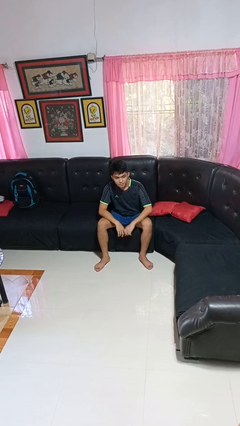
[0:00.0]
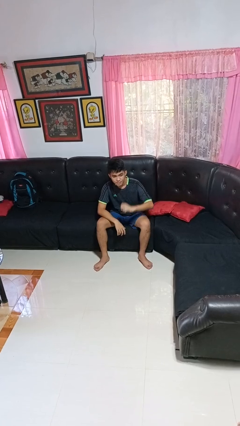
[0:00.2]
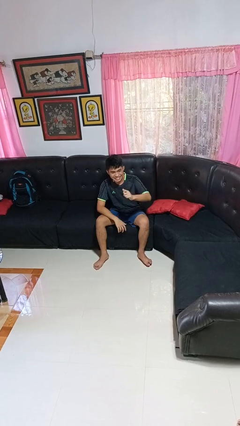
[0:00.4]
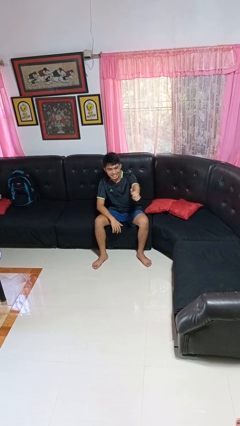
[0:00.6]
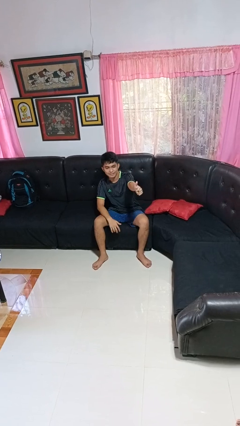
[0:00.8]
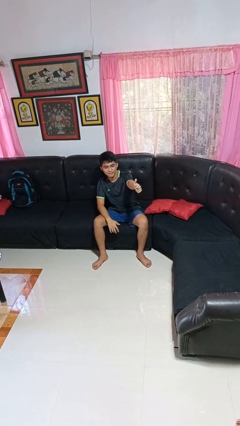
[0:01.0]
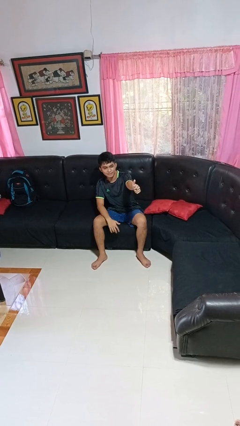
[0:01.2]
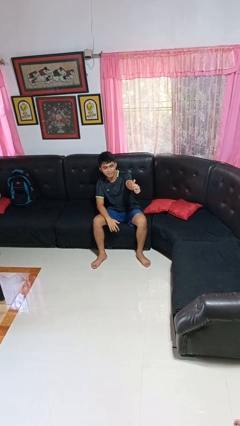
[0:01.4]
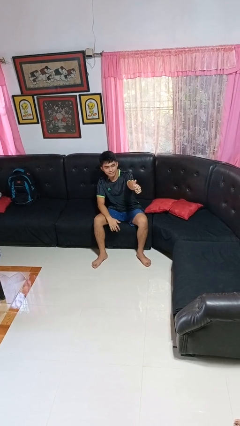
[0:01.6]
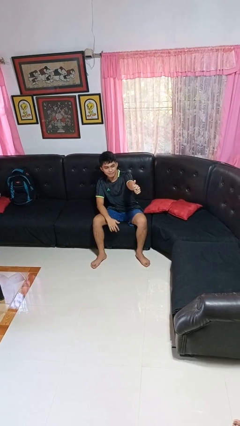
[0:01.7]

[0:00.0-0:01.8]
person gestures thumbs up

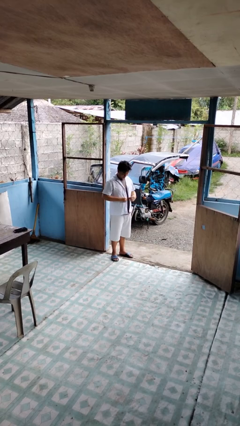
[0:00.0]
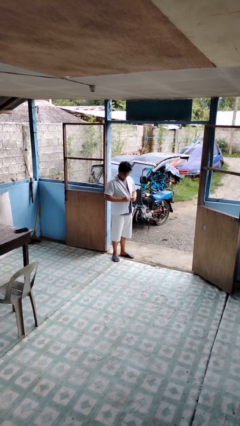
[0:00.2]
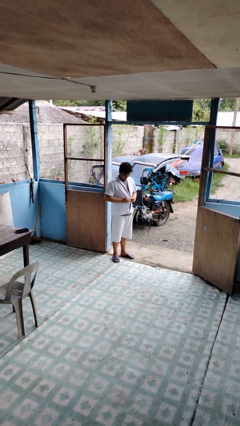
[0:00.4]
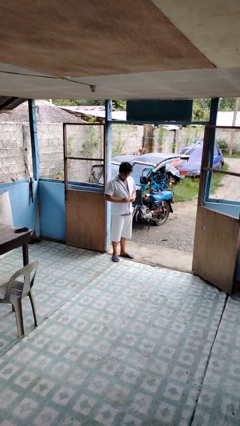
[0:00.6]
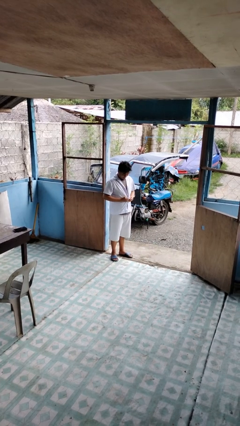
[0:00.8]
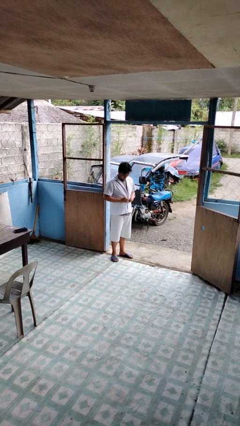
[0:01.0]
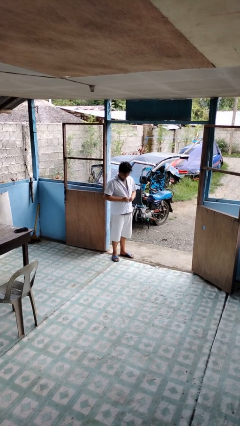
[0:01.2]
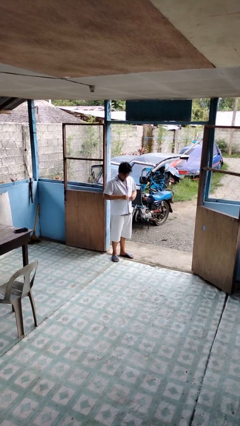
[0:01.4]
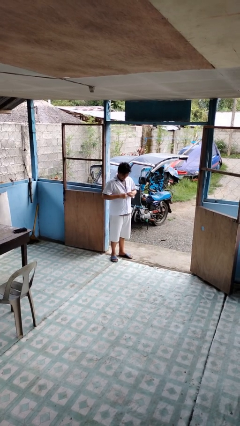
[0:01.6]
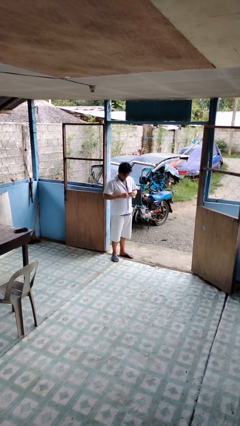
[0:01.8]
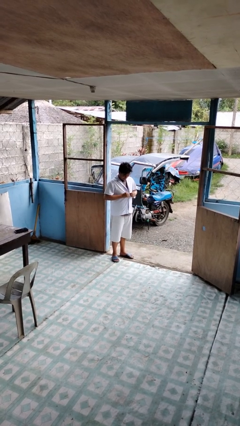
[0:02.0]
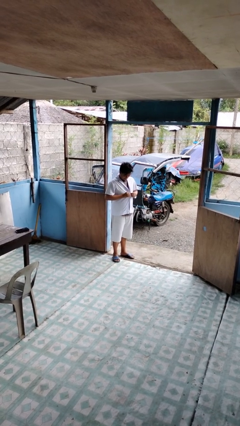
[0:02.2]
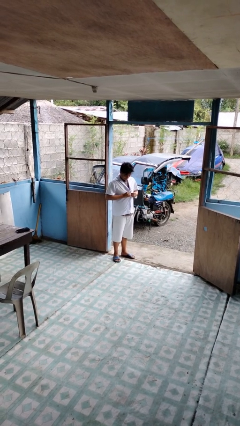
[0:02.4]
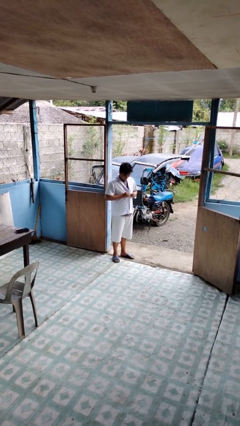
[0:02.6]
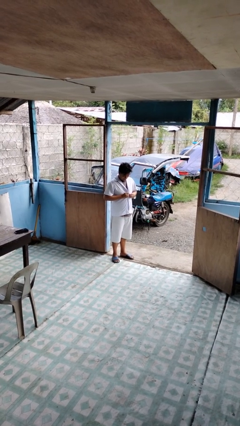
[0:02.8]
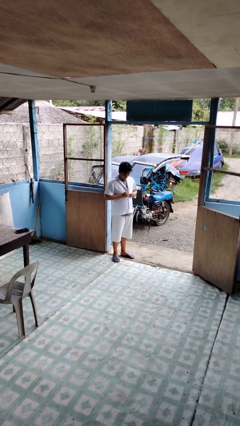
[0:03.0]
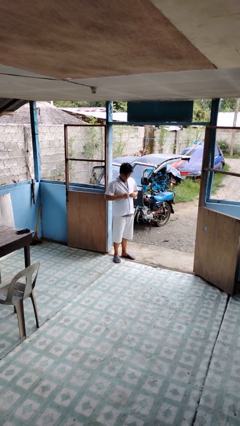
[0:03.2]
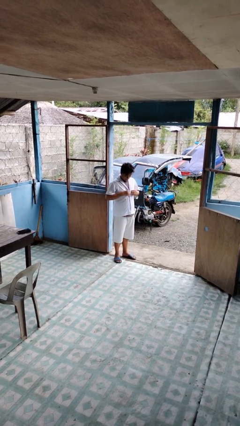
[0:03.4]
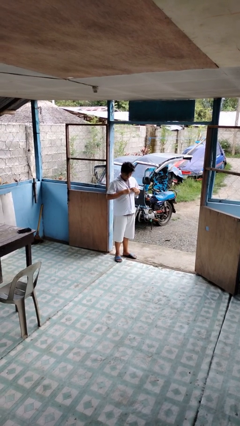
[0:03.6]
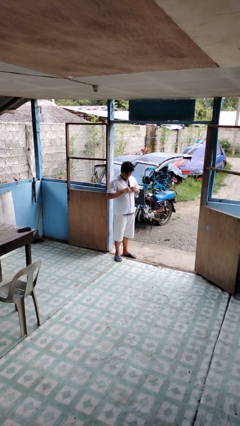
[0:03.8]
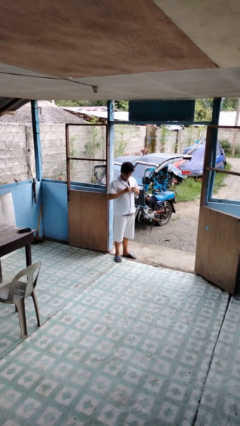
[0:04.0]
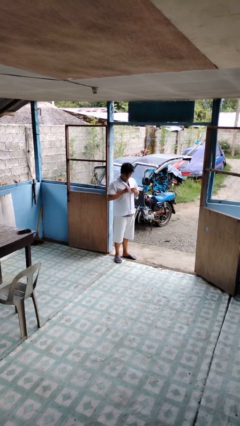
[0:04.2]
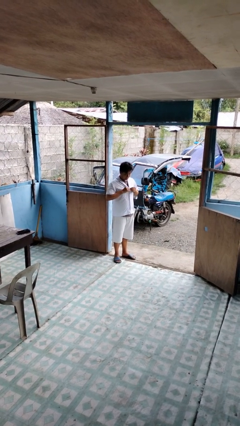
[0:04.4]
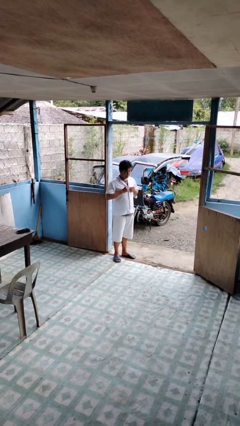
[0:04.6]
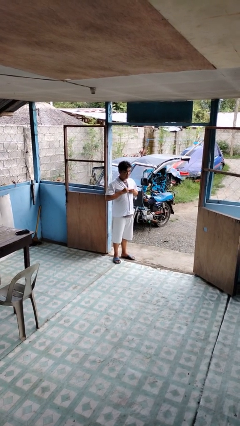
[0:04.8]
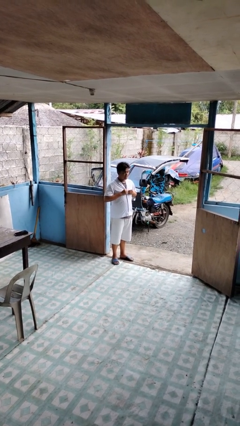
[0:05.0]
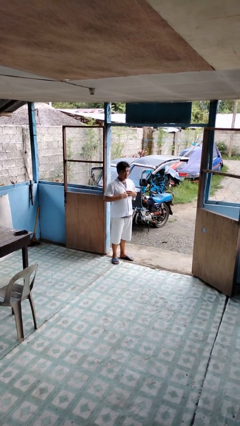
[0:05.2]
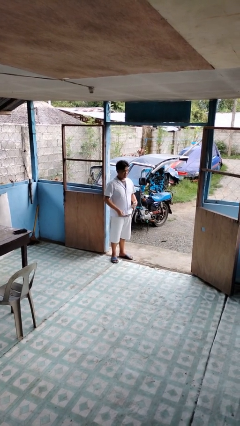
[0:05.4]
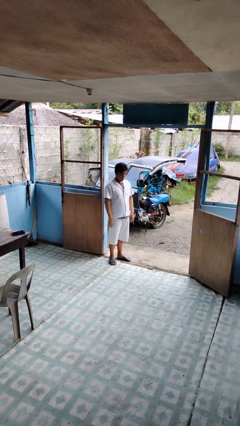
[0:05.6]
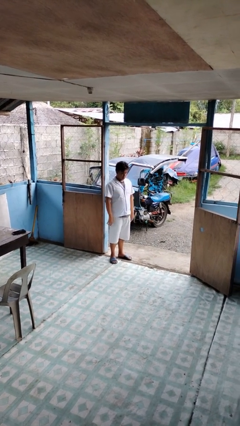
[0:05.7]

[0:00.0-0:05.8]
person buttons shirt

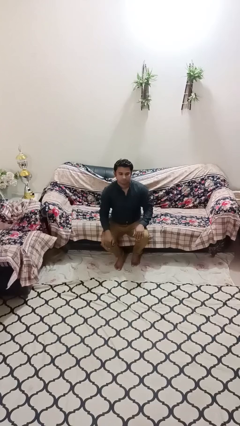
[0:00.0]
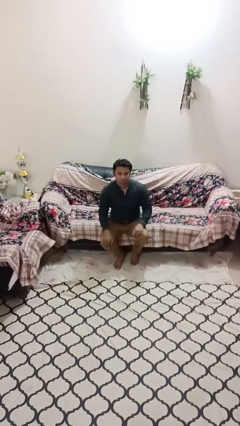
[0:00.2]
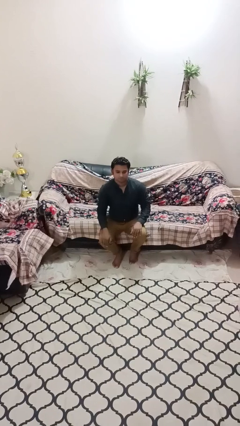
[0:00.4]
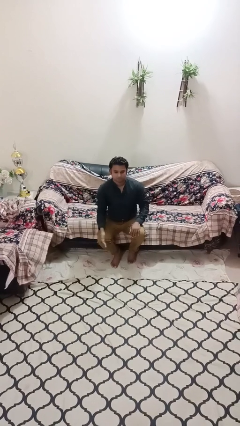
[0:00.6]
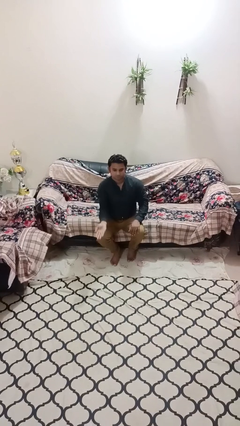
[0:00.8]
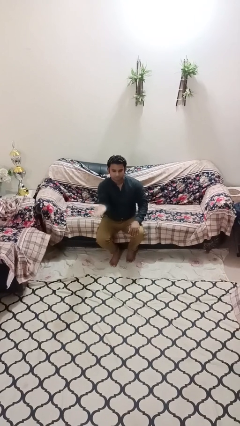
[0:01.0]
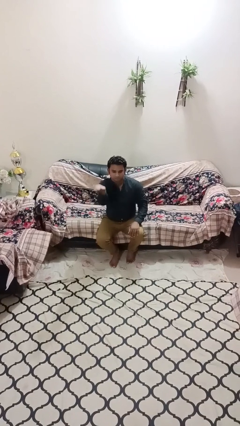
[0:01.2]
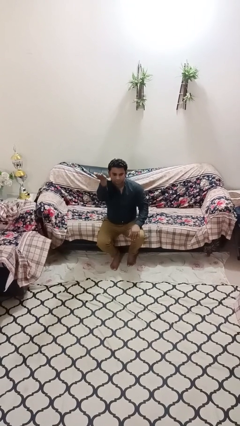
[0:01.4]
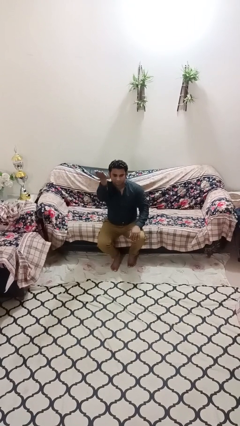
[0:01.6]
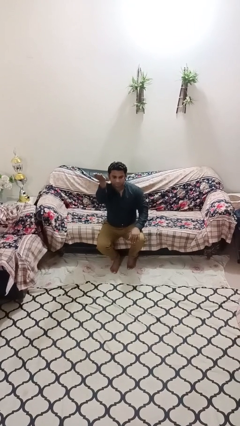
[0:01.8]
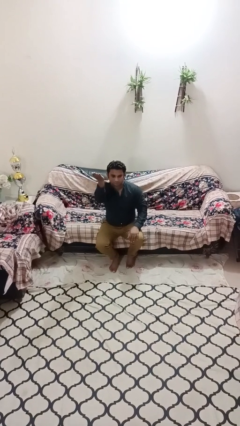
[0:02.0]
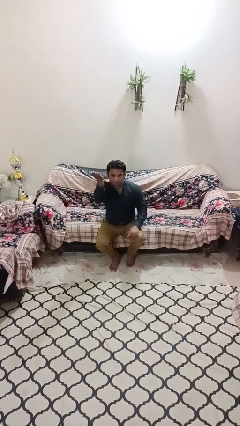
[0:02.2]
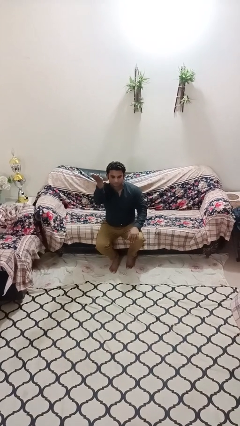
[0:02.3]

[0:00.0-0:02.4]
person gestures swipe up

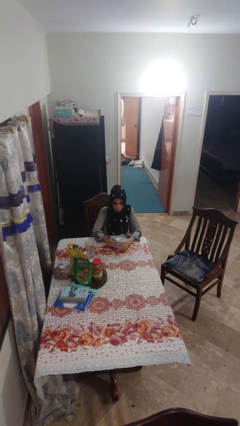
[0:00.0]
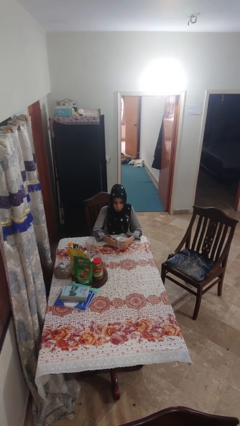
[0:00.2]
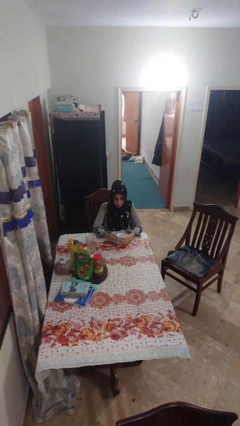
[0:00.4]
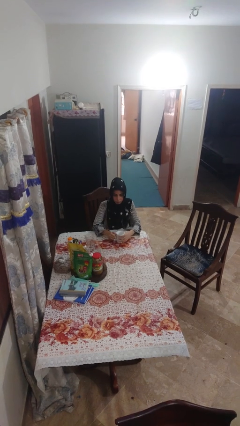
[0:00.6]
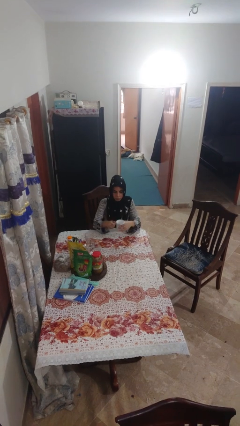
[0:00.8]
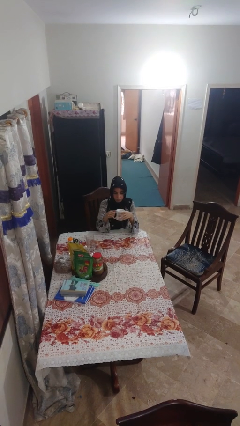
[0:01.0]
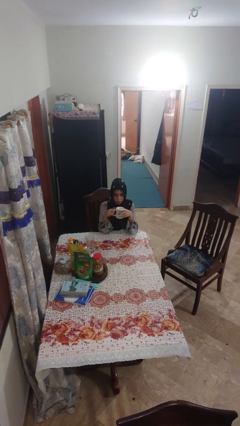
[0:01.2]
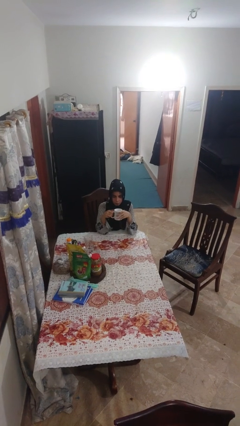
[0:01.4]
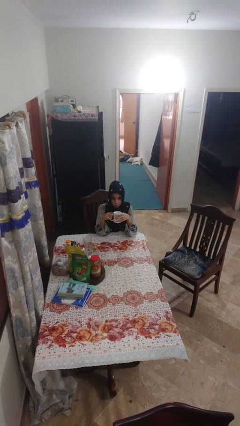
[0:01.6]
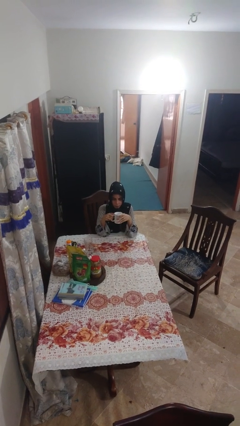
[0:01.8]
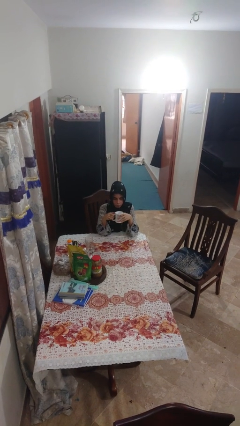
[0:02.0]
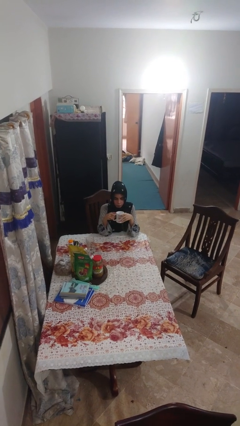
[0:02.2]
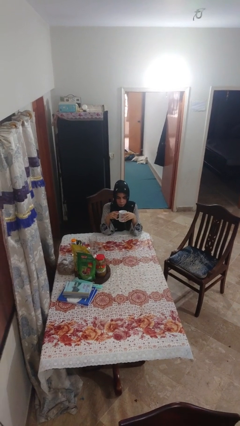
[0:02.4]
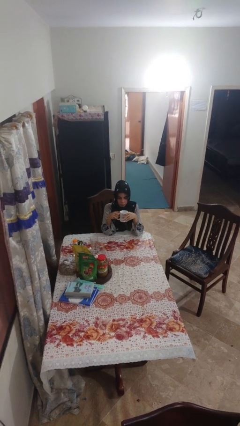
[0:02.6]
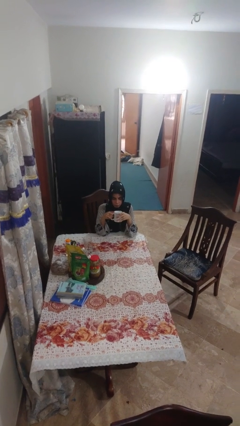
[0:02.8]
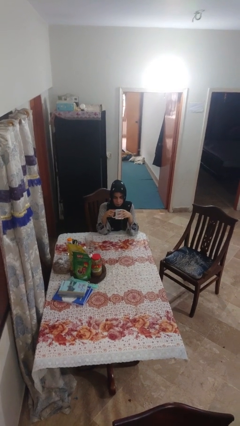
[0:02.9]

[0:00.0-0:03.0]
person picks up object from table

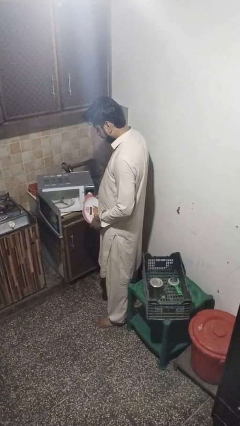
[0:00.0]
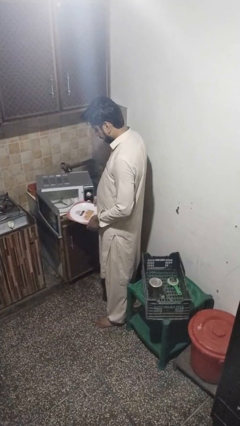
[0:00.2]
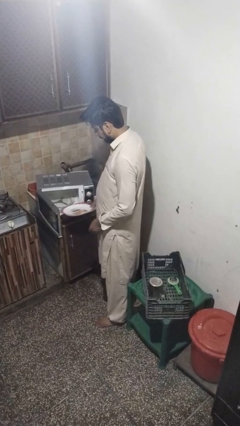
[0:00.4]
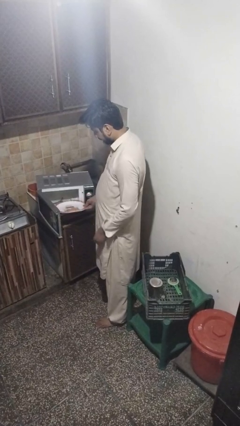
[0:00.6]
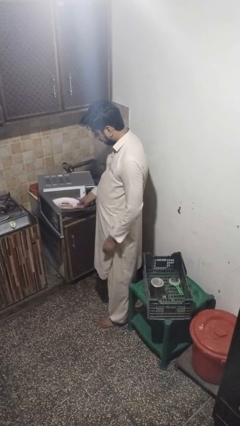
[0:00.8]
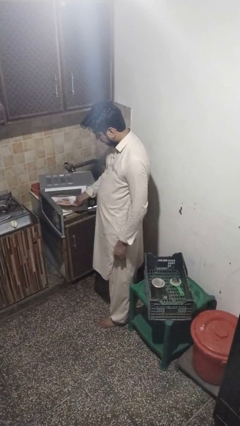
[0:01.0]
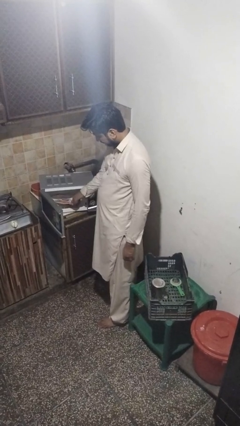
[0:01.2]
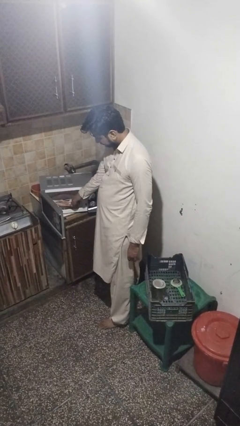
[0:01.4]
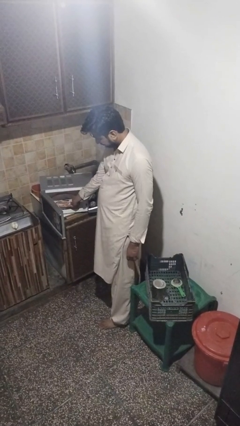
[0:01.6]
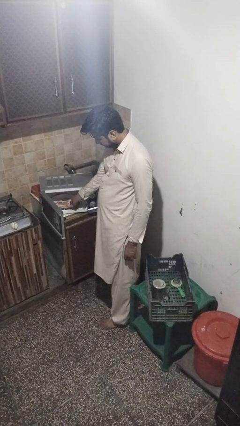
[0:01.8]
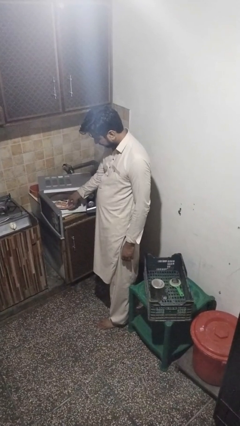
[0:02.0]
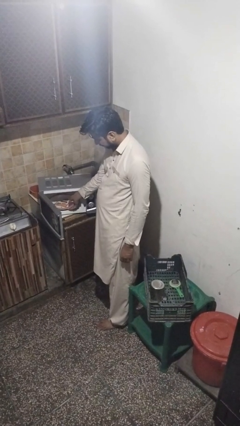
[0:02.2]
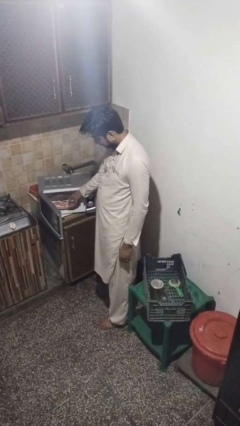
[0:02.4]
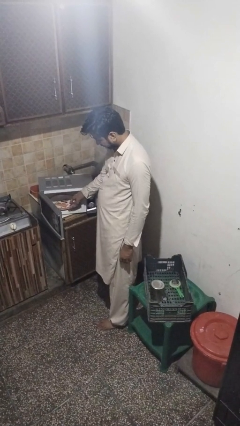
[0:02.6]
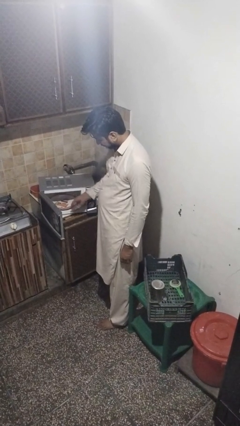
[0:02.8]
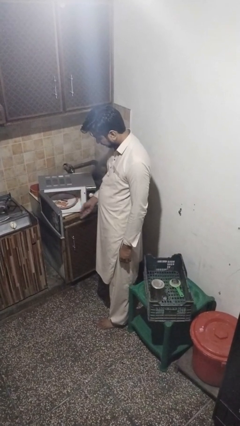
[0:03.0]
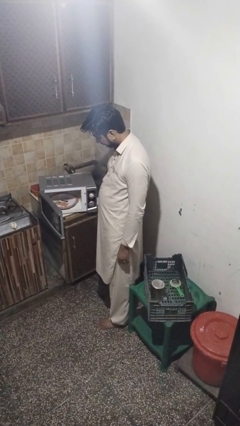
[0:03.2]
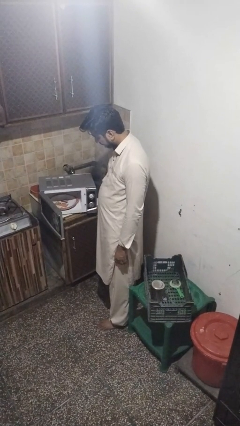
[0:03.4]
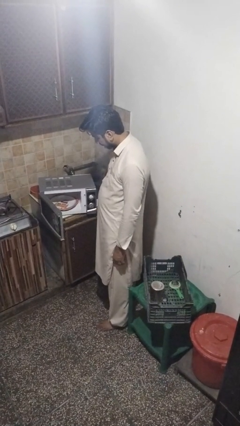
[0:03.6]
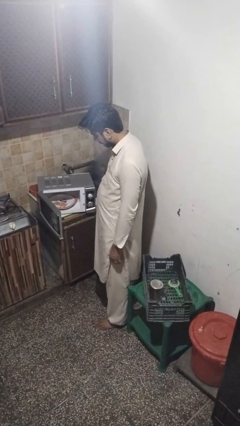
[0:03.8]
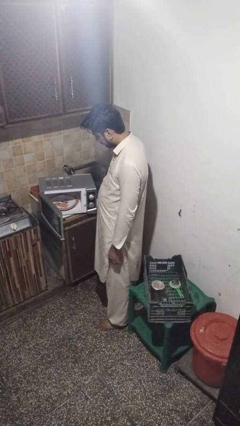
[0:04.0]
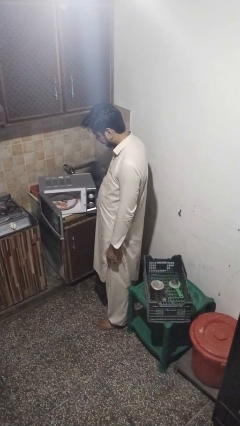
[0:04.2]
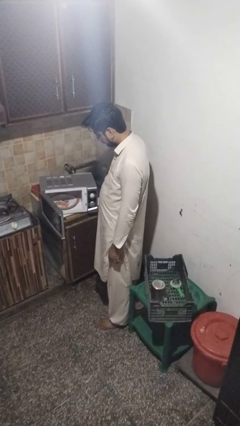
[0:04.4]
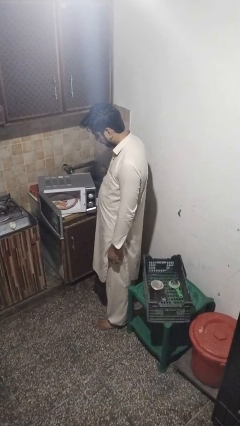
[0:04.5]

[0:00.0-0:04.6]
person puts object into microwave
